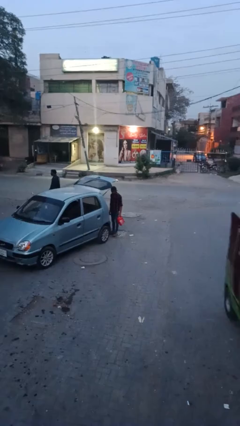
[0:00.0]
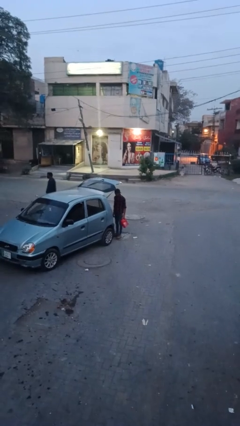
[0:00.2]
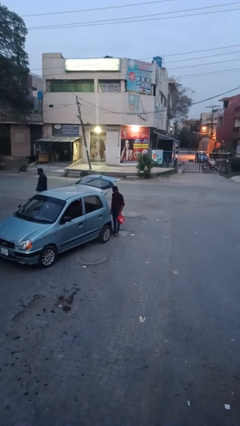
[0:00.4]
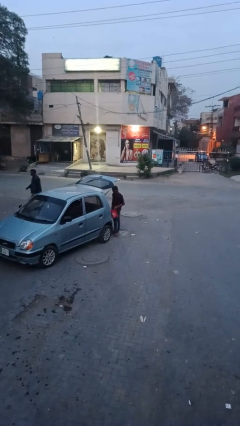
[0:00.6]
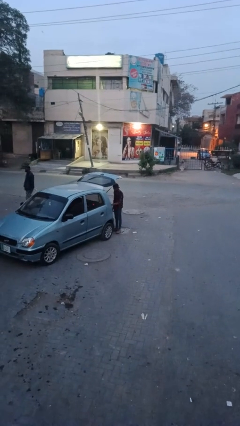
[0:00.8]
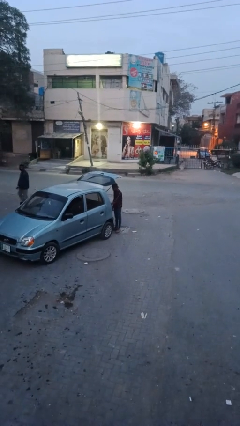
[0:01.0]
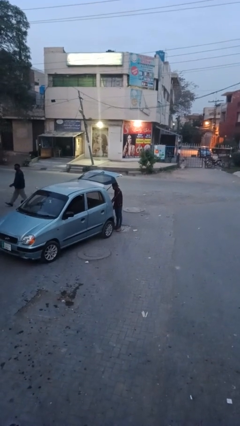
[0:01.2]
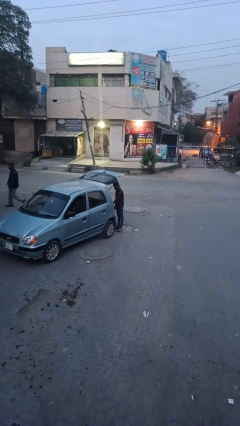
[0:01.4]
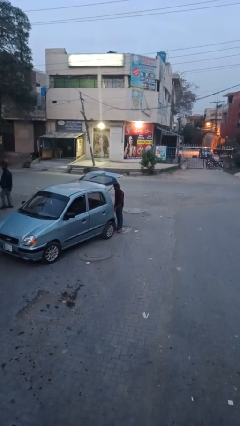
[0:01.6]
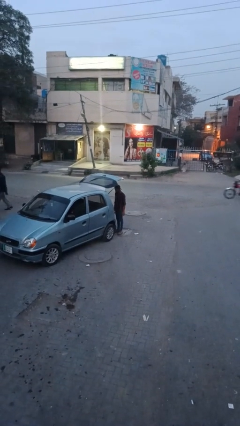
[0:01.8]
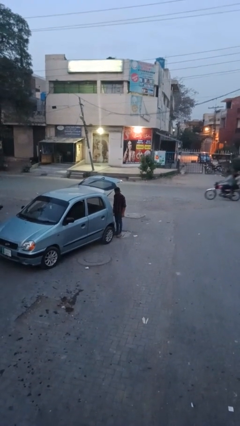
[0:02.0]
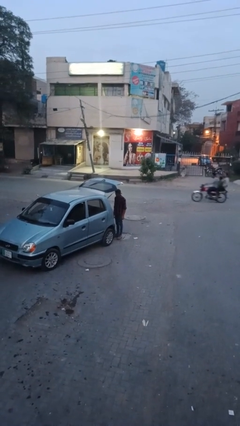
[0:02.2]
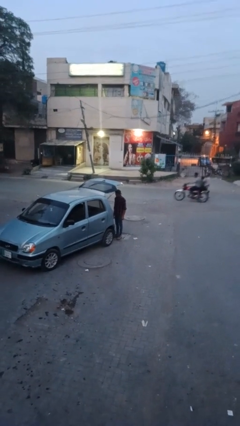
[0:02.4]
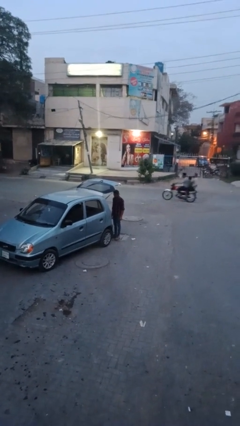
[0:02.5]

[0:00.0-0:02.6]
person loads car

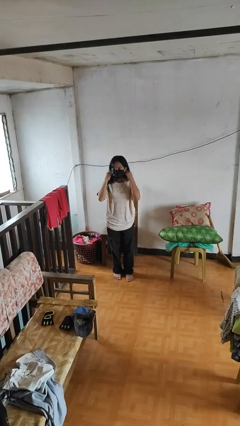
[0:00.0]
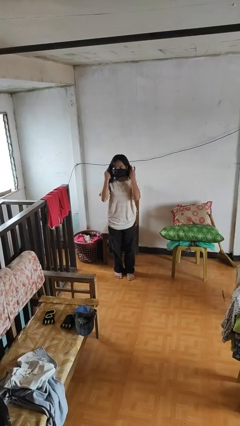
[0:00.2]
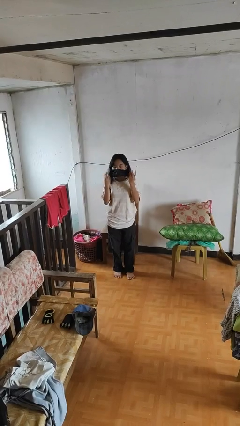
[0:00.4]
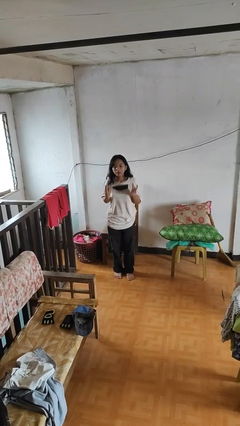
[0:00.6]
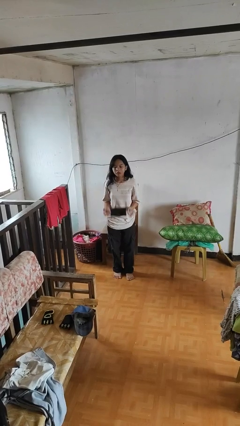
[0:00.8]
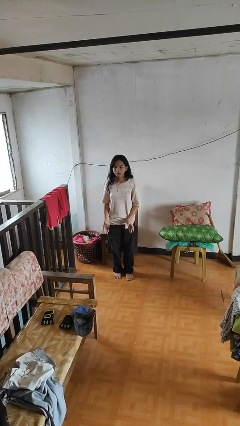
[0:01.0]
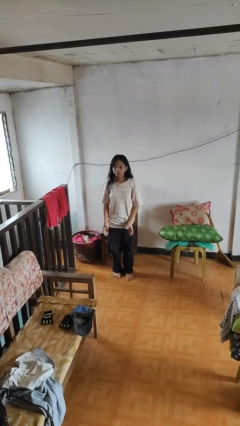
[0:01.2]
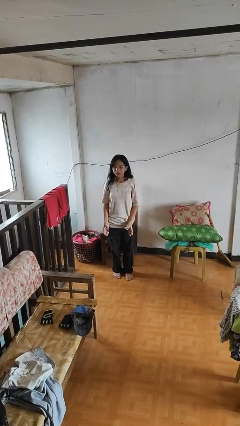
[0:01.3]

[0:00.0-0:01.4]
person takes off facemask

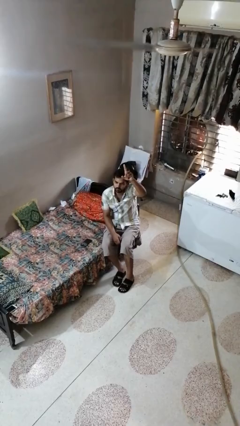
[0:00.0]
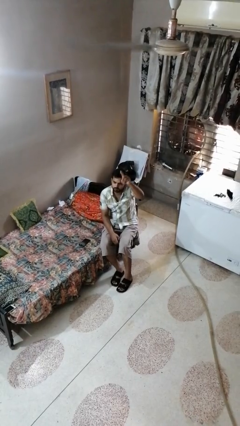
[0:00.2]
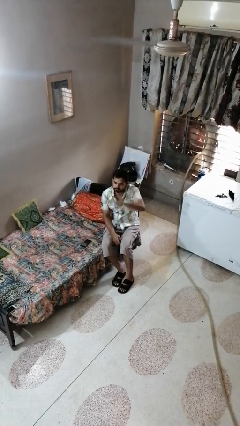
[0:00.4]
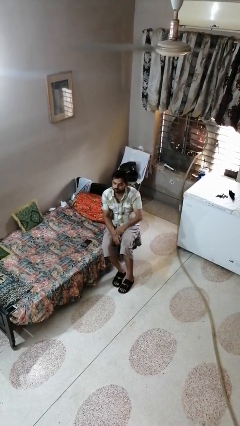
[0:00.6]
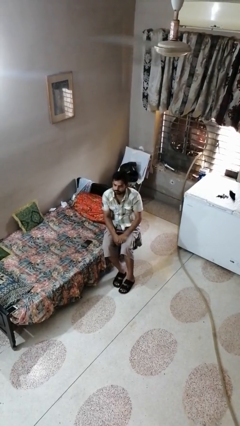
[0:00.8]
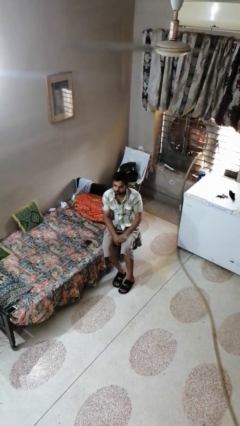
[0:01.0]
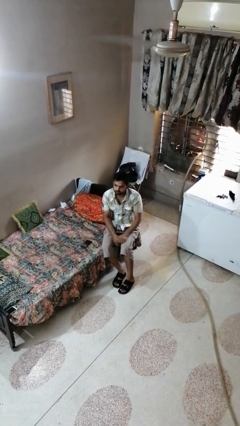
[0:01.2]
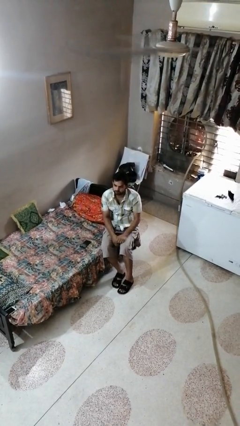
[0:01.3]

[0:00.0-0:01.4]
person gestures lower hand

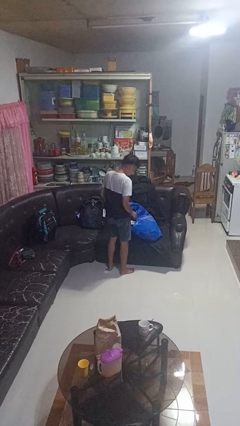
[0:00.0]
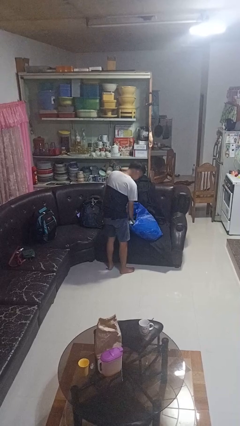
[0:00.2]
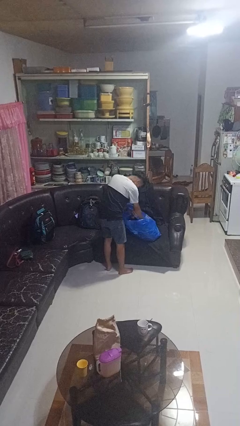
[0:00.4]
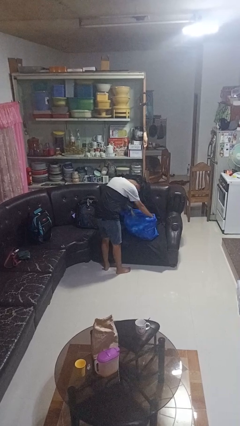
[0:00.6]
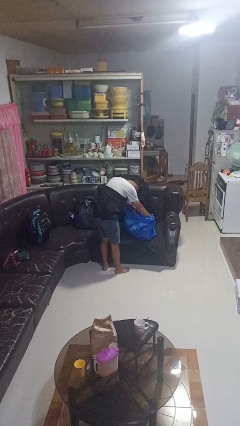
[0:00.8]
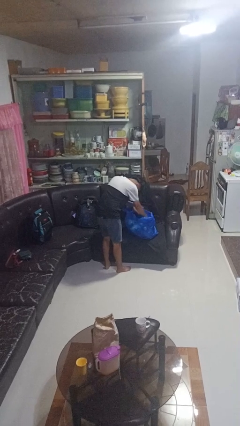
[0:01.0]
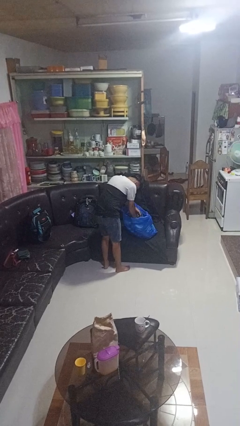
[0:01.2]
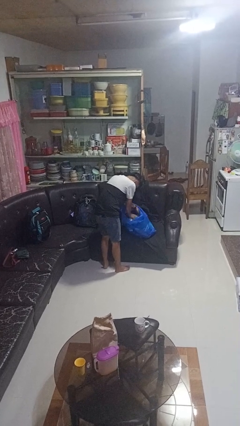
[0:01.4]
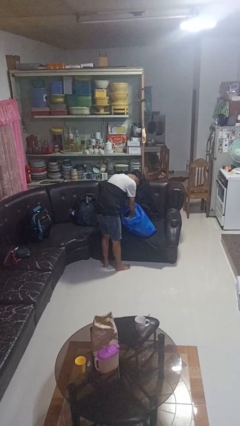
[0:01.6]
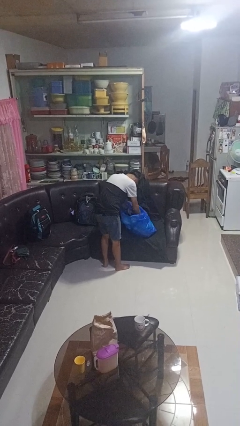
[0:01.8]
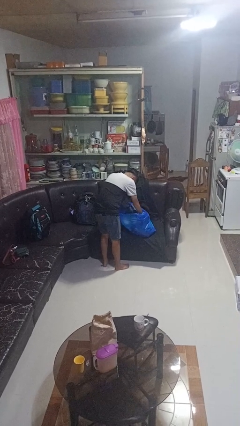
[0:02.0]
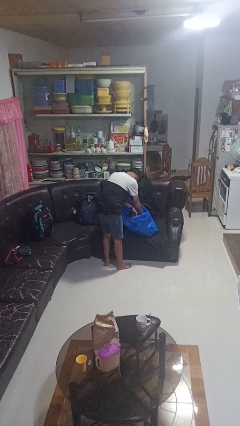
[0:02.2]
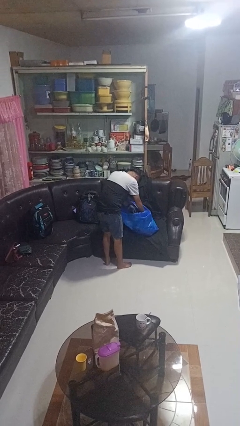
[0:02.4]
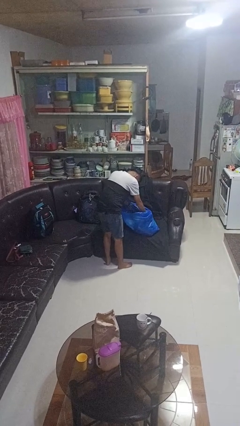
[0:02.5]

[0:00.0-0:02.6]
person searches in bag

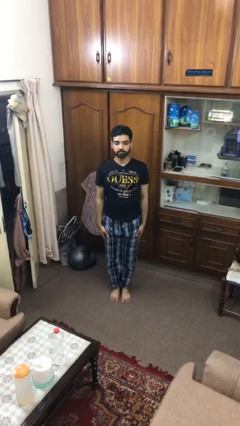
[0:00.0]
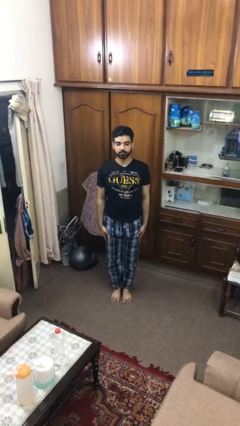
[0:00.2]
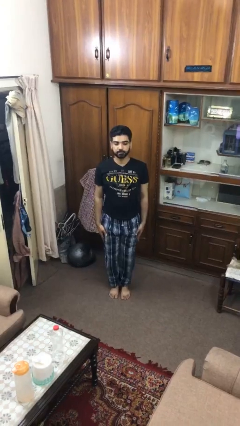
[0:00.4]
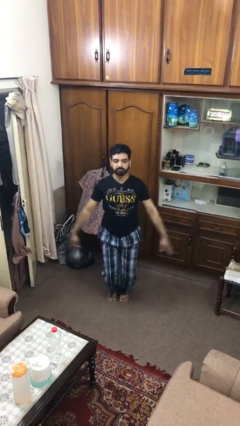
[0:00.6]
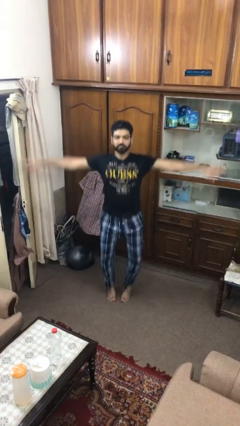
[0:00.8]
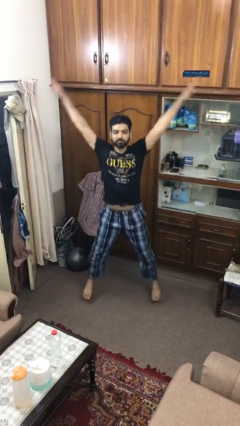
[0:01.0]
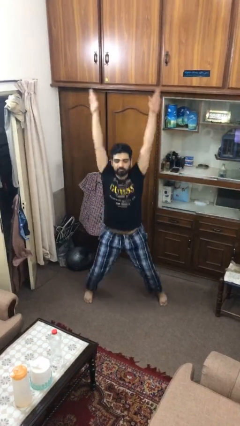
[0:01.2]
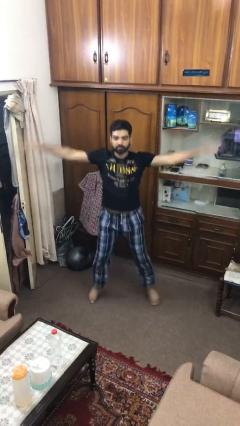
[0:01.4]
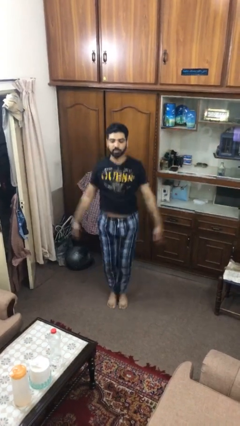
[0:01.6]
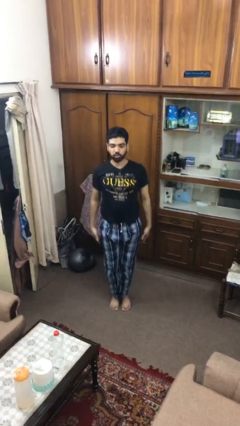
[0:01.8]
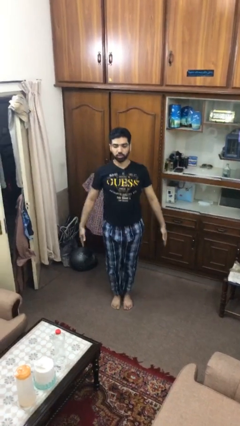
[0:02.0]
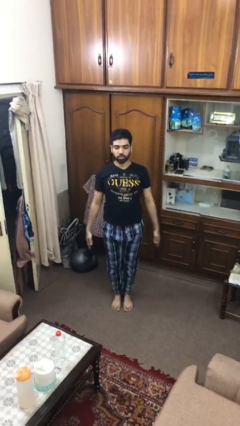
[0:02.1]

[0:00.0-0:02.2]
person exercises with jumping jacks

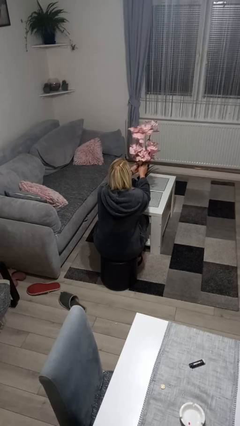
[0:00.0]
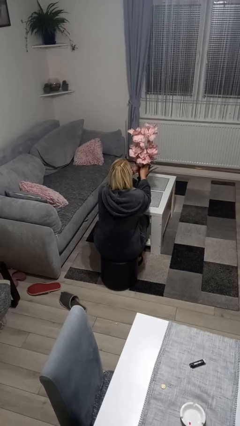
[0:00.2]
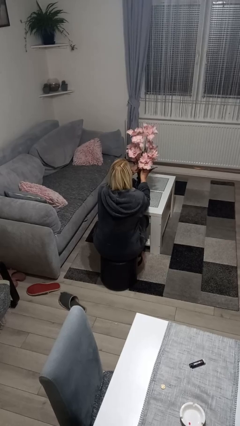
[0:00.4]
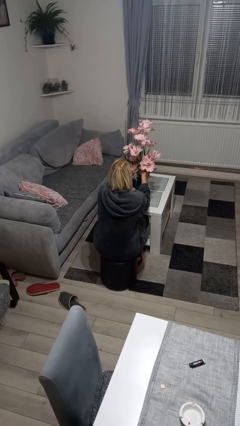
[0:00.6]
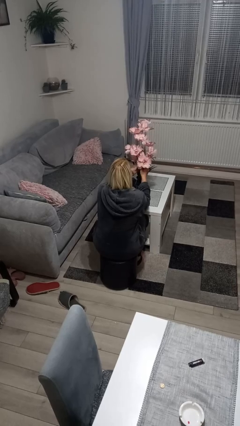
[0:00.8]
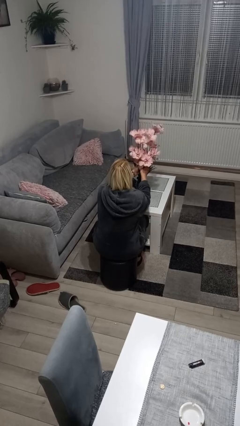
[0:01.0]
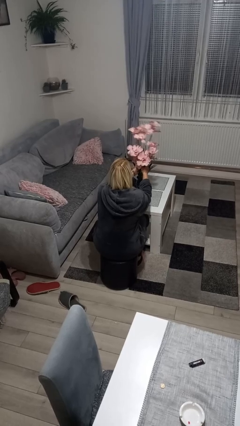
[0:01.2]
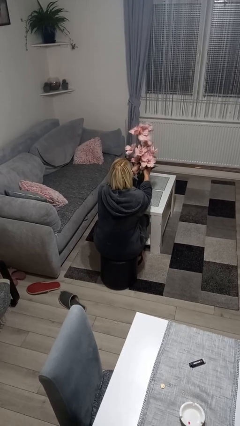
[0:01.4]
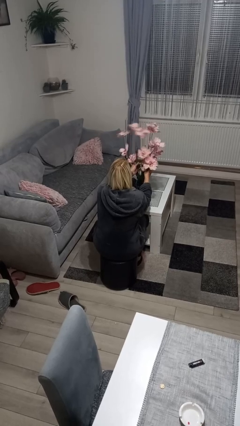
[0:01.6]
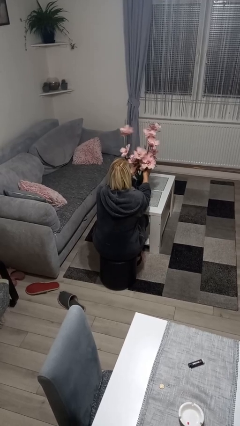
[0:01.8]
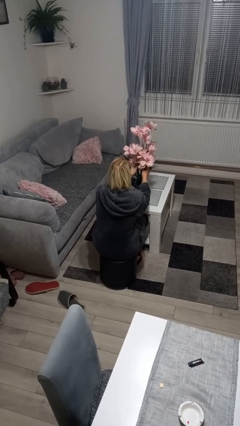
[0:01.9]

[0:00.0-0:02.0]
person arranges flowers in vase

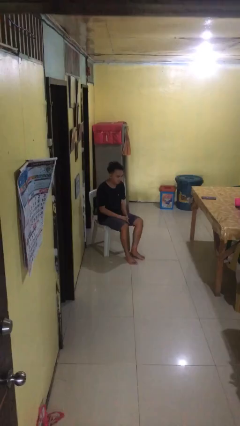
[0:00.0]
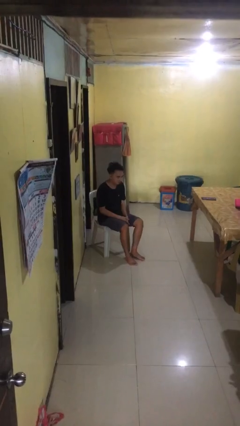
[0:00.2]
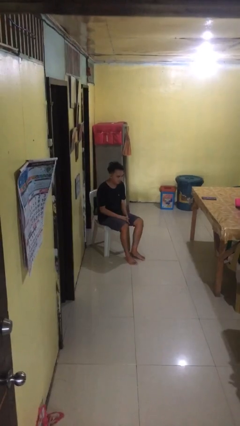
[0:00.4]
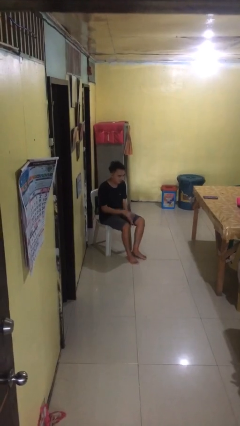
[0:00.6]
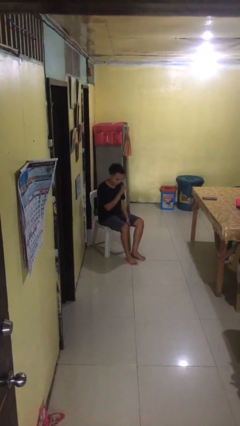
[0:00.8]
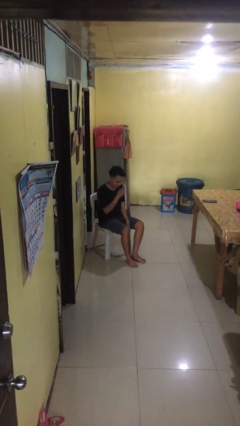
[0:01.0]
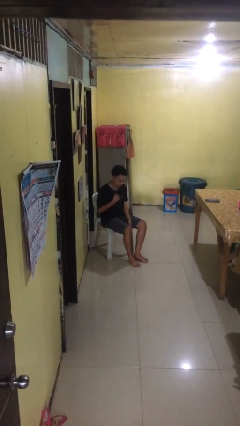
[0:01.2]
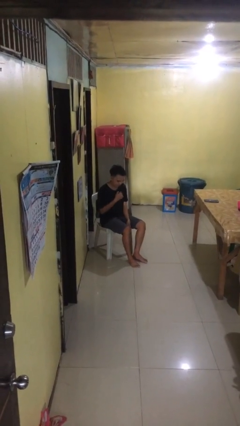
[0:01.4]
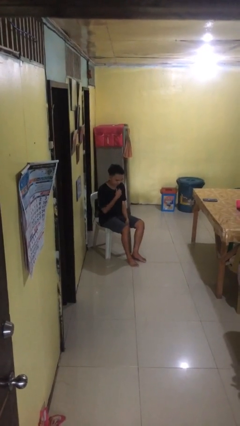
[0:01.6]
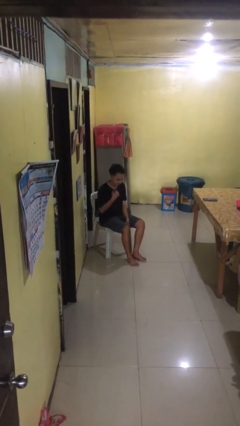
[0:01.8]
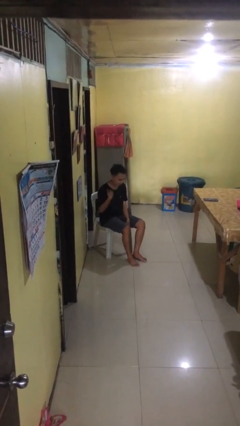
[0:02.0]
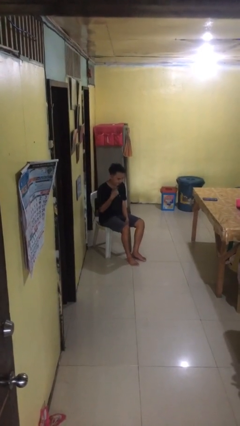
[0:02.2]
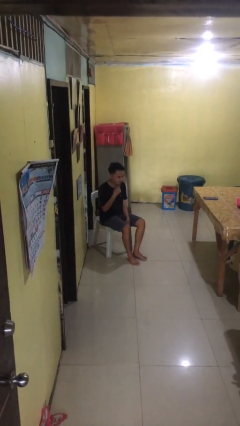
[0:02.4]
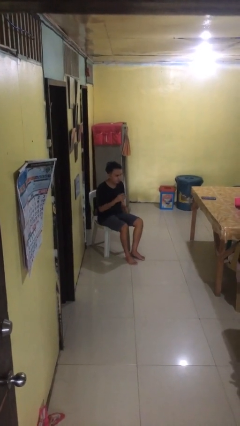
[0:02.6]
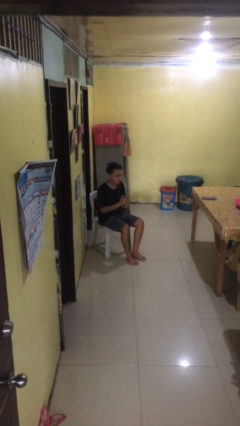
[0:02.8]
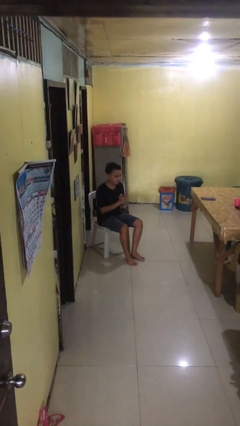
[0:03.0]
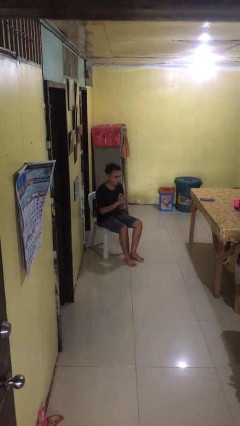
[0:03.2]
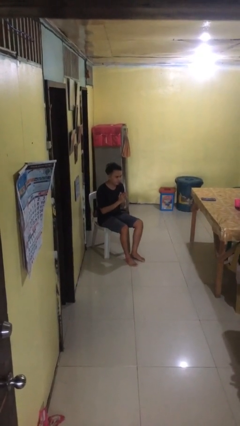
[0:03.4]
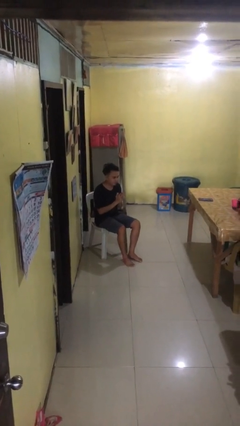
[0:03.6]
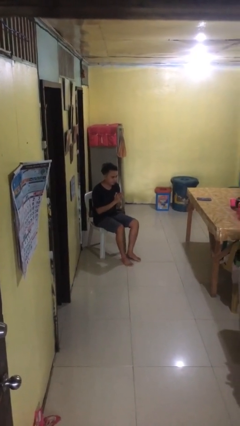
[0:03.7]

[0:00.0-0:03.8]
person prays

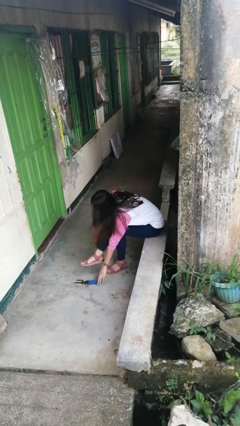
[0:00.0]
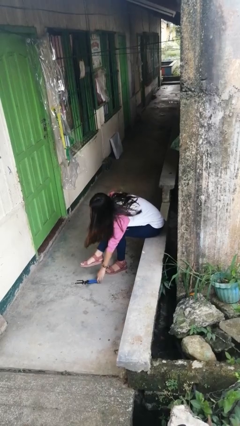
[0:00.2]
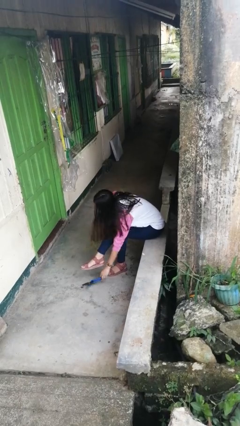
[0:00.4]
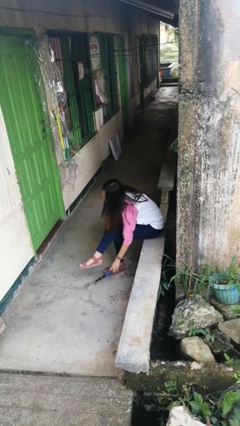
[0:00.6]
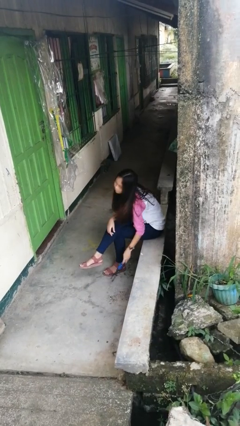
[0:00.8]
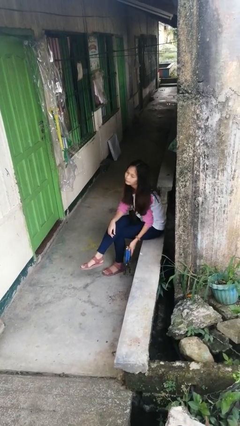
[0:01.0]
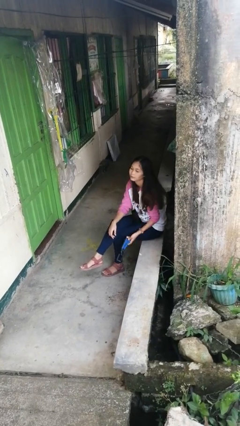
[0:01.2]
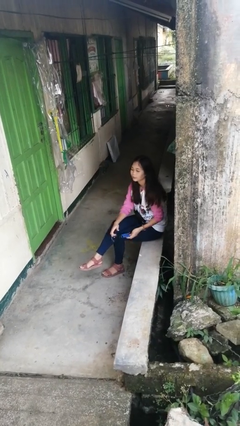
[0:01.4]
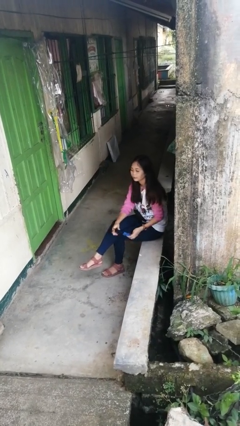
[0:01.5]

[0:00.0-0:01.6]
person picks up object from floor
